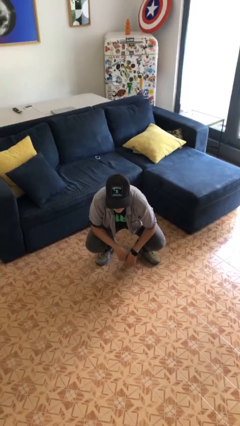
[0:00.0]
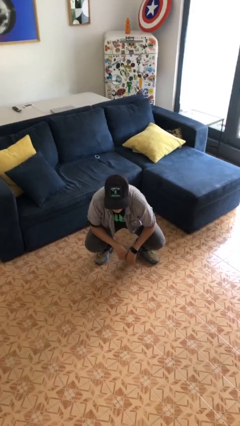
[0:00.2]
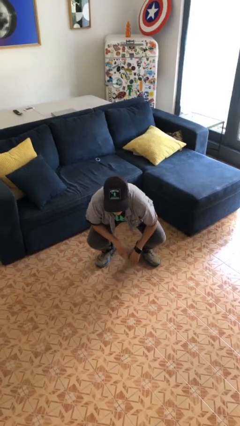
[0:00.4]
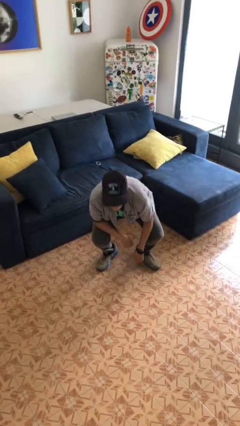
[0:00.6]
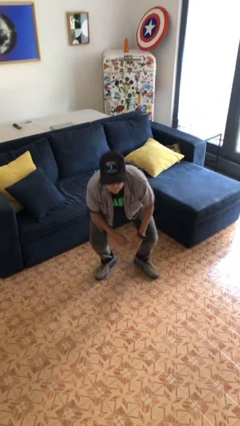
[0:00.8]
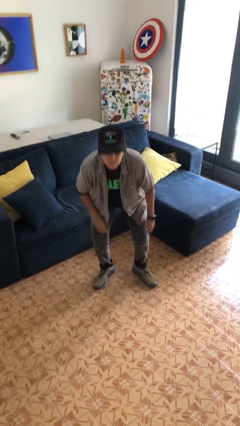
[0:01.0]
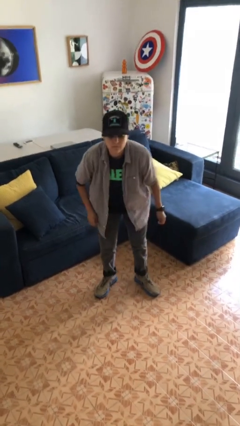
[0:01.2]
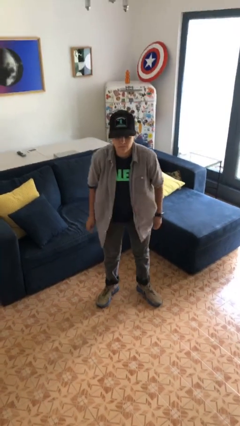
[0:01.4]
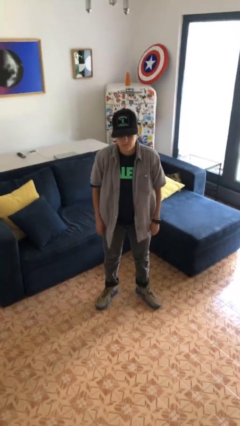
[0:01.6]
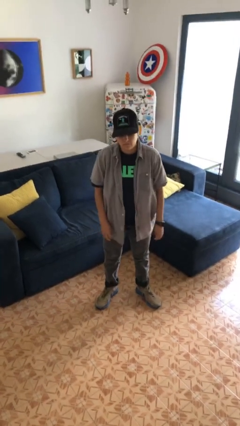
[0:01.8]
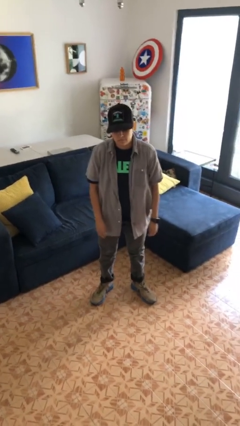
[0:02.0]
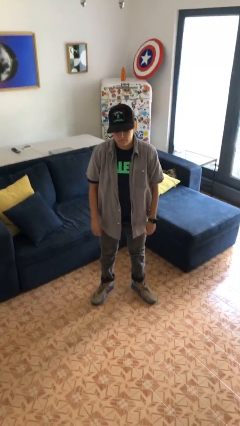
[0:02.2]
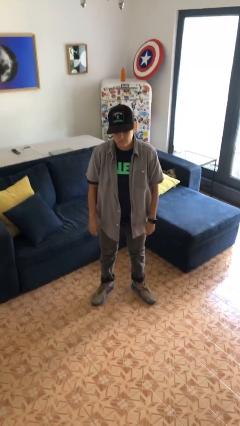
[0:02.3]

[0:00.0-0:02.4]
person stands up

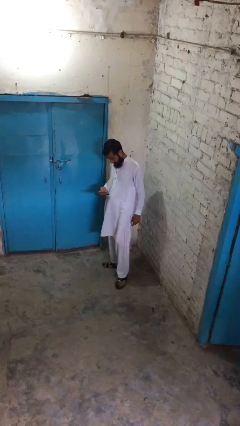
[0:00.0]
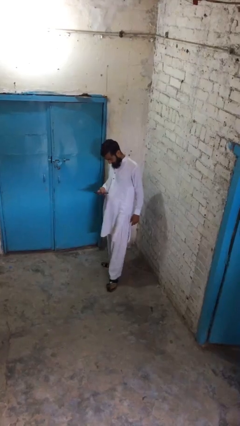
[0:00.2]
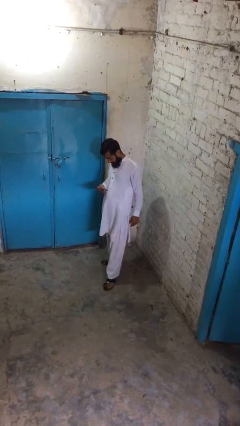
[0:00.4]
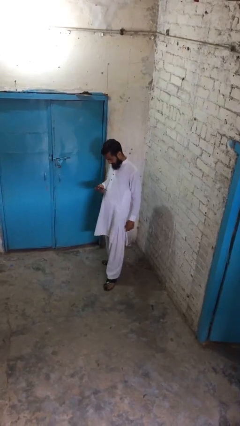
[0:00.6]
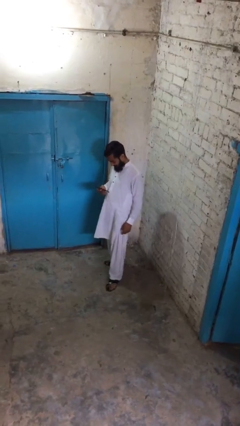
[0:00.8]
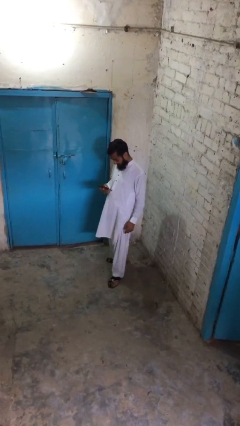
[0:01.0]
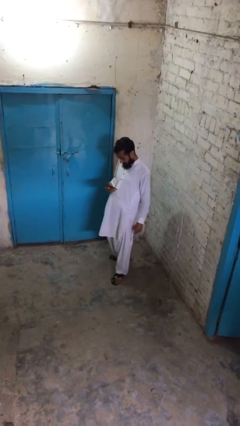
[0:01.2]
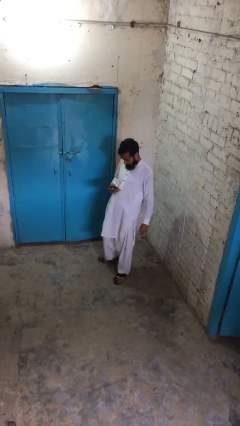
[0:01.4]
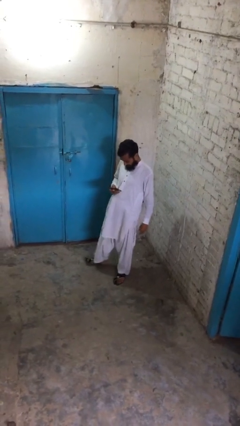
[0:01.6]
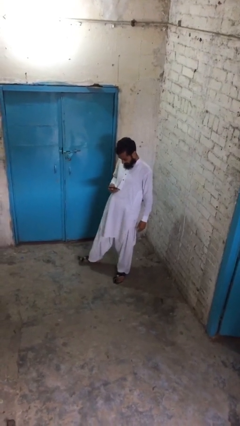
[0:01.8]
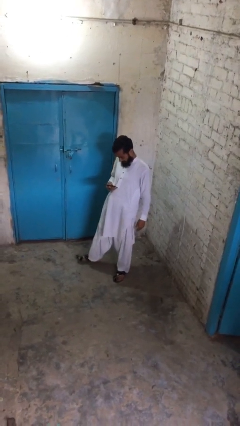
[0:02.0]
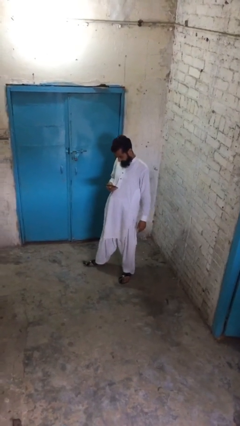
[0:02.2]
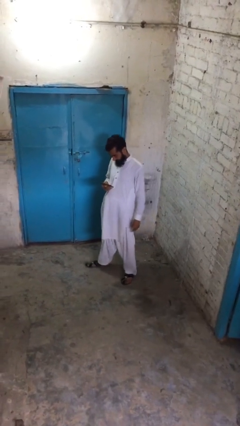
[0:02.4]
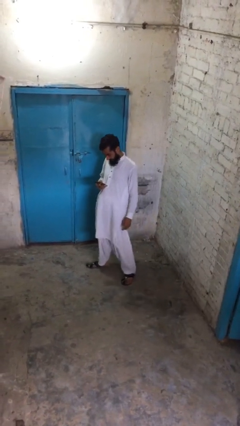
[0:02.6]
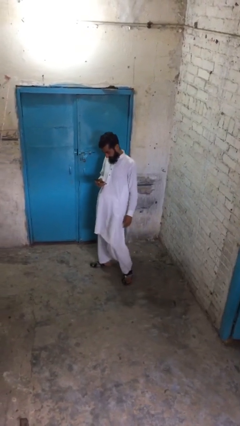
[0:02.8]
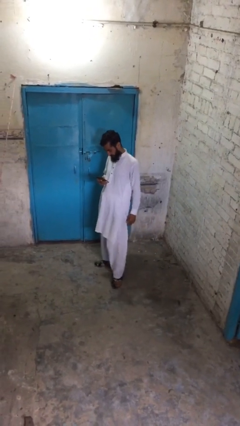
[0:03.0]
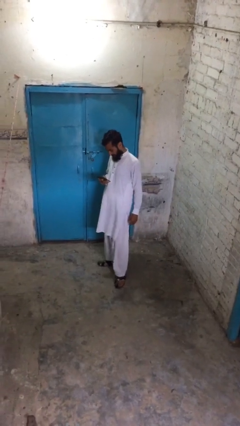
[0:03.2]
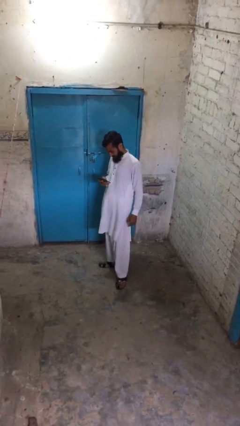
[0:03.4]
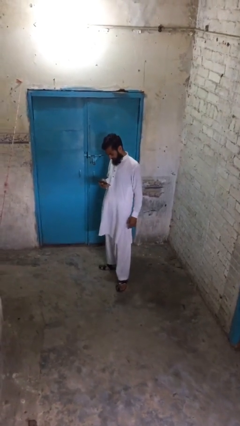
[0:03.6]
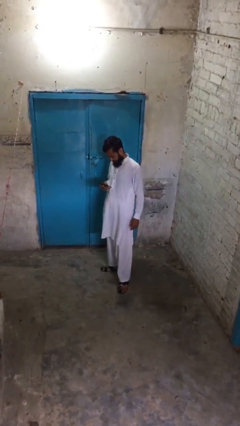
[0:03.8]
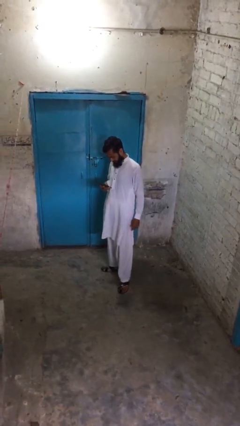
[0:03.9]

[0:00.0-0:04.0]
person texts on phone

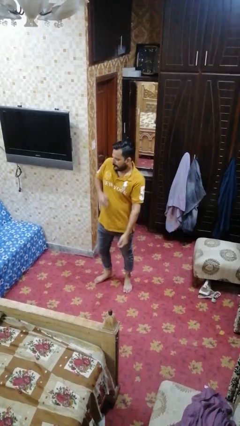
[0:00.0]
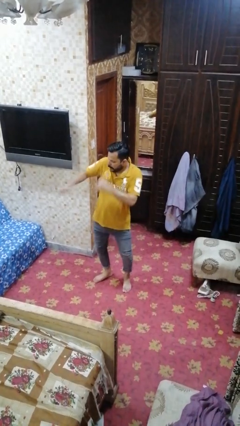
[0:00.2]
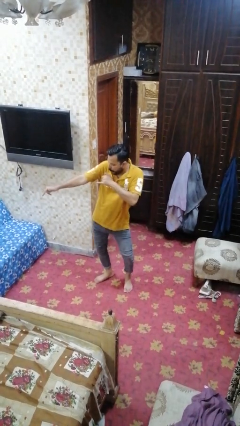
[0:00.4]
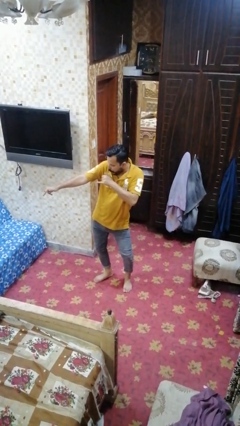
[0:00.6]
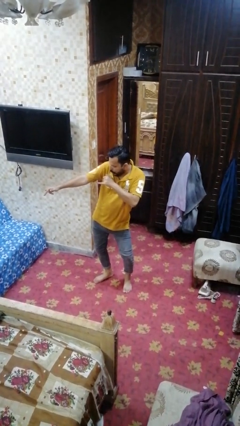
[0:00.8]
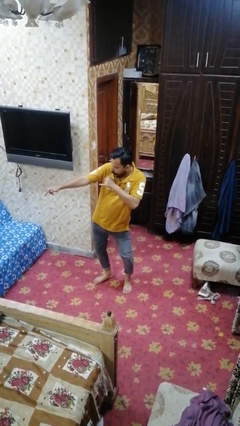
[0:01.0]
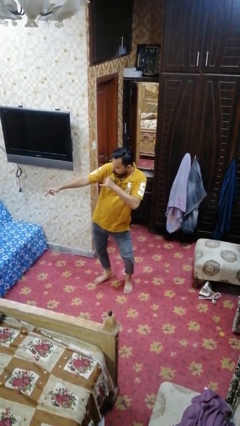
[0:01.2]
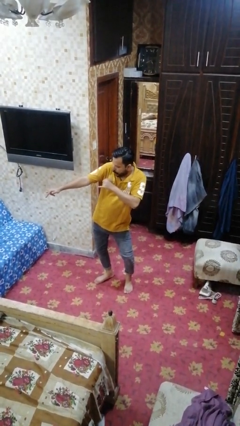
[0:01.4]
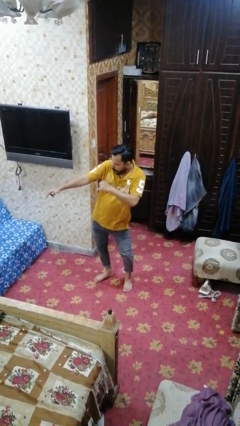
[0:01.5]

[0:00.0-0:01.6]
person karate chop

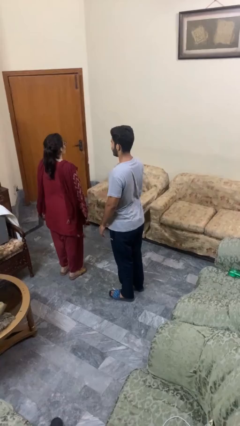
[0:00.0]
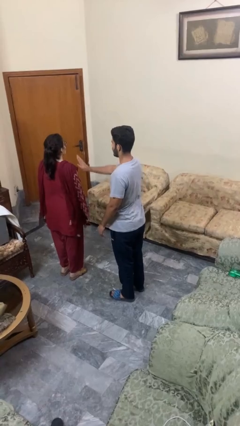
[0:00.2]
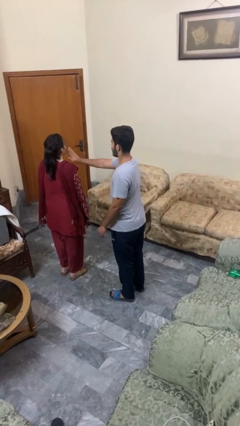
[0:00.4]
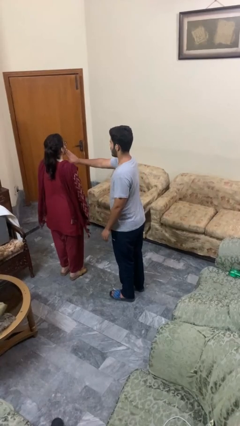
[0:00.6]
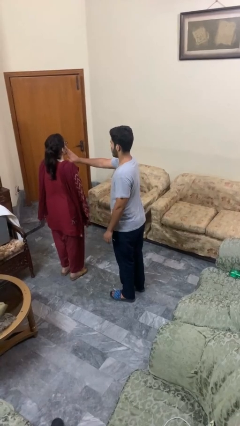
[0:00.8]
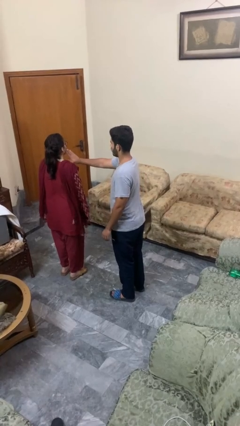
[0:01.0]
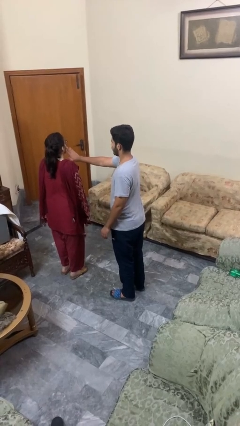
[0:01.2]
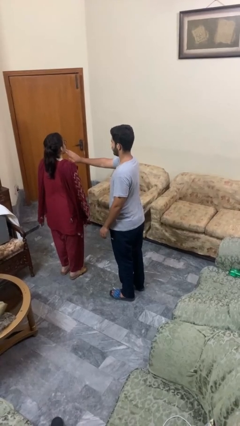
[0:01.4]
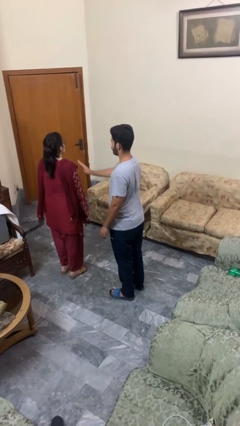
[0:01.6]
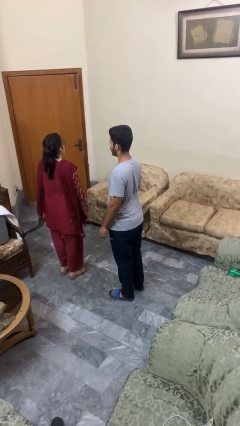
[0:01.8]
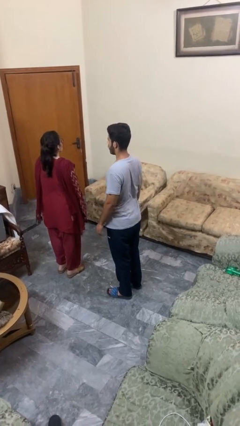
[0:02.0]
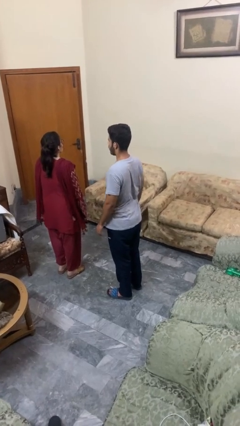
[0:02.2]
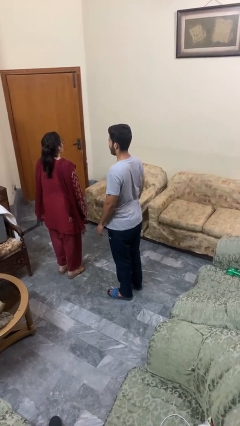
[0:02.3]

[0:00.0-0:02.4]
person touches face of person

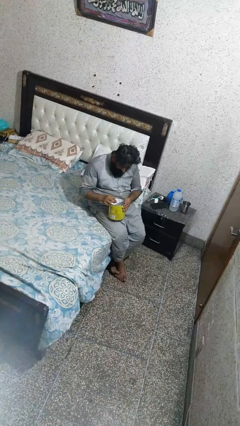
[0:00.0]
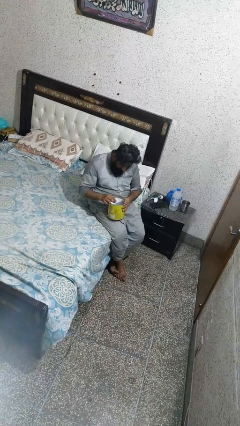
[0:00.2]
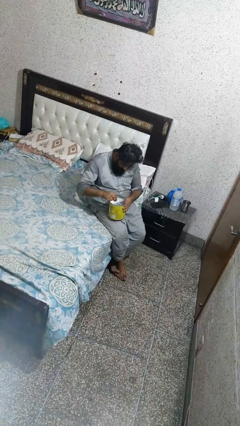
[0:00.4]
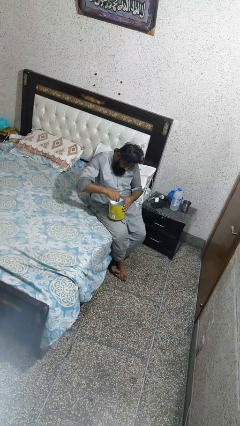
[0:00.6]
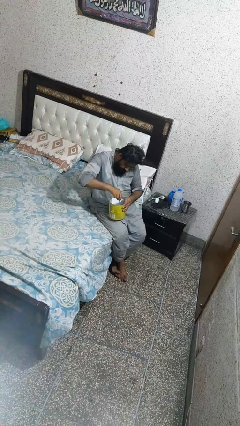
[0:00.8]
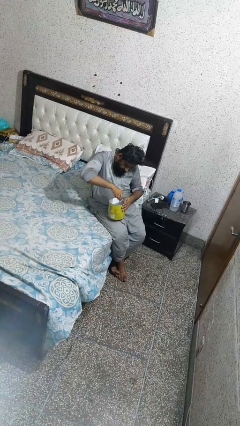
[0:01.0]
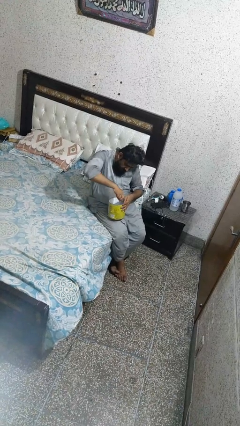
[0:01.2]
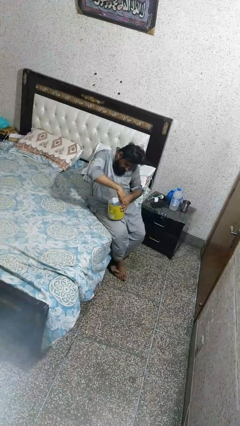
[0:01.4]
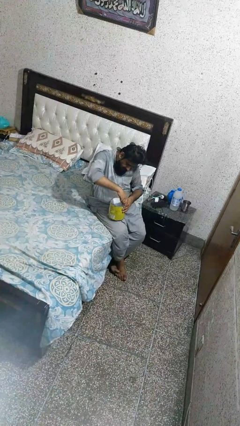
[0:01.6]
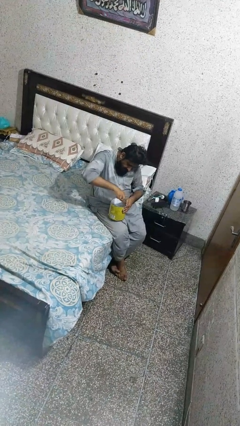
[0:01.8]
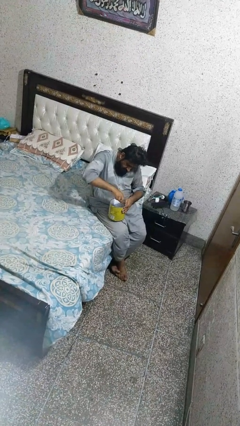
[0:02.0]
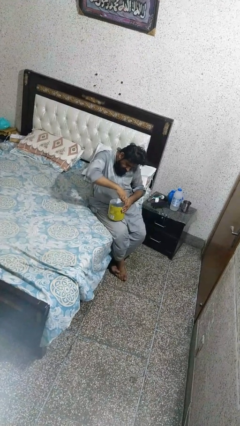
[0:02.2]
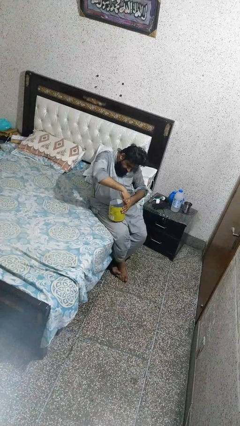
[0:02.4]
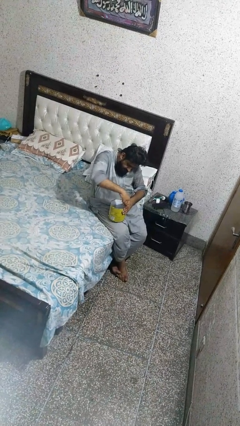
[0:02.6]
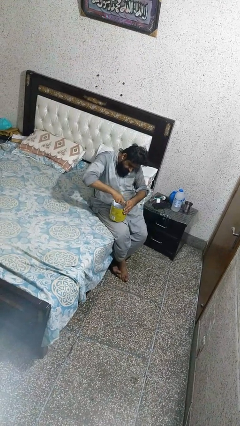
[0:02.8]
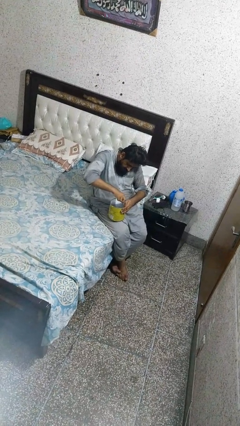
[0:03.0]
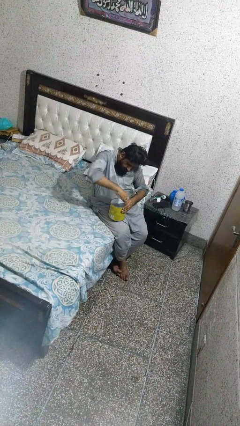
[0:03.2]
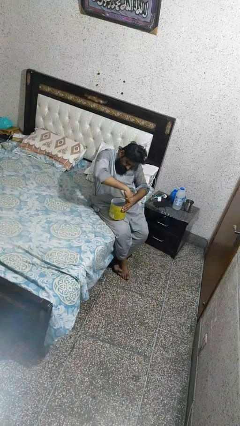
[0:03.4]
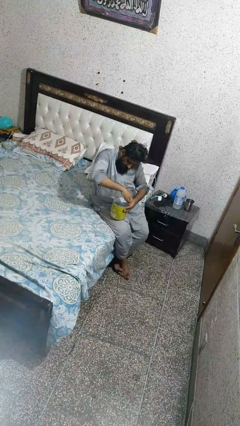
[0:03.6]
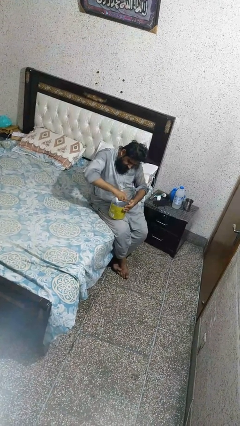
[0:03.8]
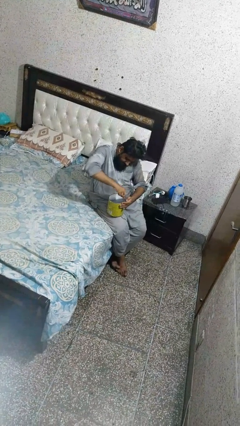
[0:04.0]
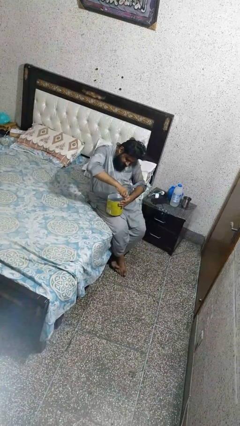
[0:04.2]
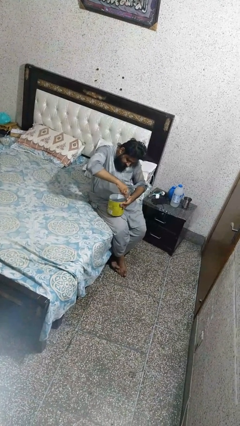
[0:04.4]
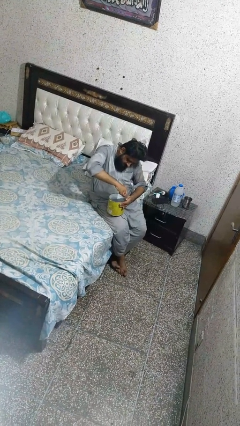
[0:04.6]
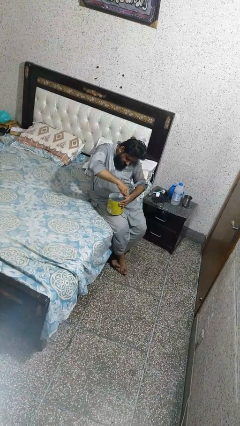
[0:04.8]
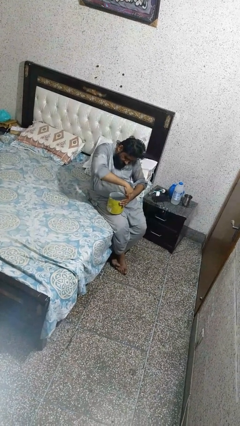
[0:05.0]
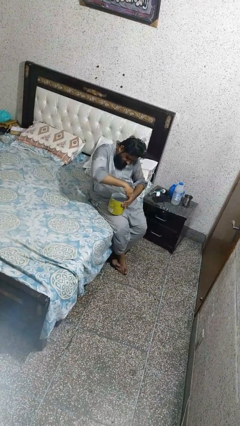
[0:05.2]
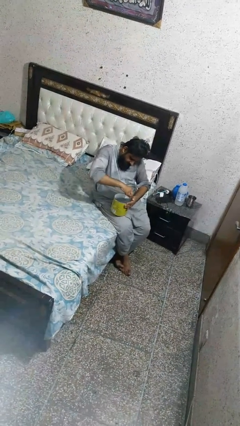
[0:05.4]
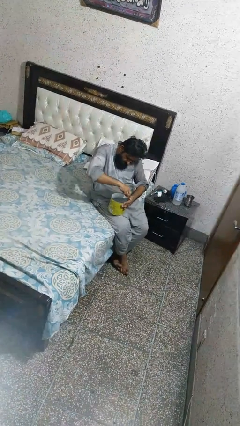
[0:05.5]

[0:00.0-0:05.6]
person opens can with can opener

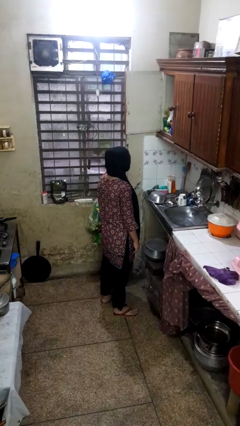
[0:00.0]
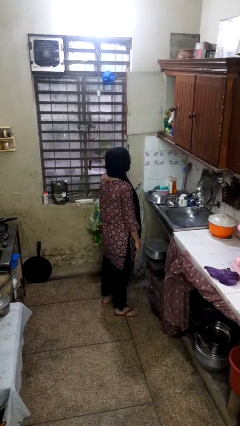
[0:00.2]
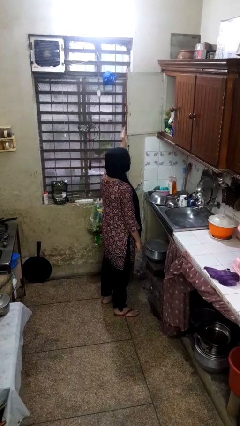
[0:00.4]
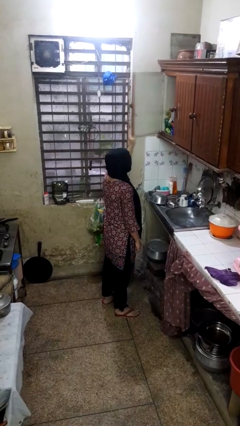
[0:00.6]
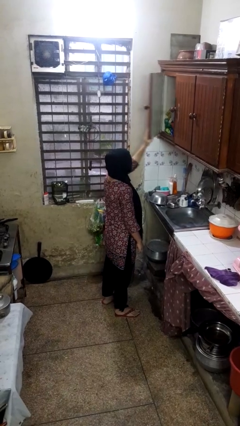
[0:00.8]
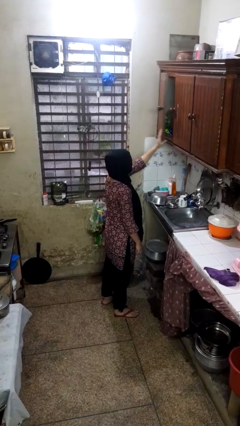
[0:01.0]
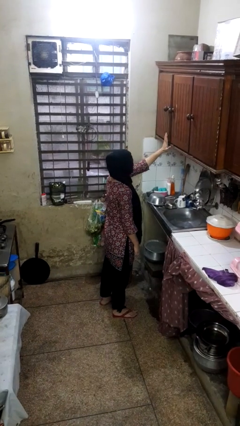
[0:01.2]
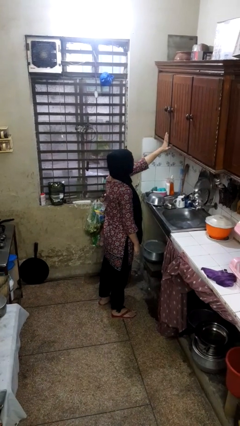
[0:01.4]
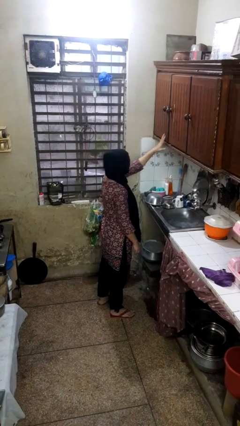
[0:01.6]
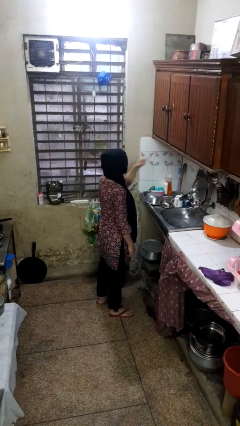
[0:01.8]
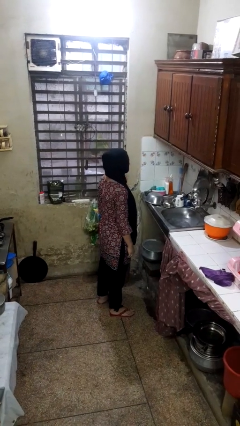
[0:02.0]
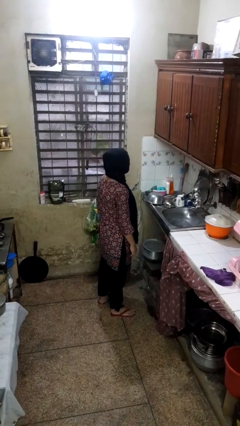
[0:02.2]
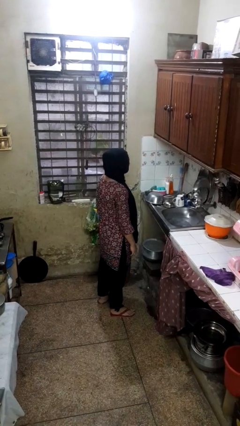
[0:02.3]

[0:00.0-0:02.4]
person closes cabinet
